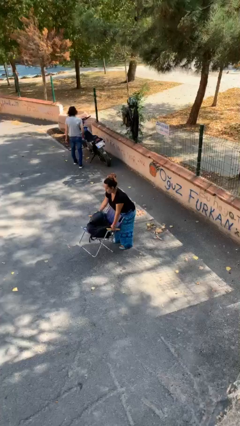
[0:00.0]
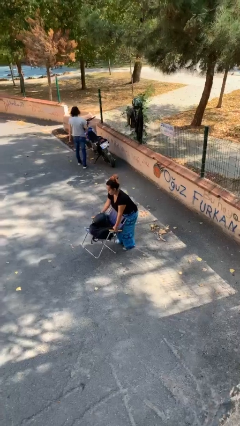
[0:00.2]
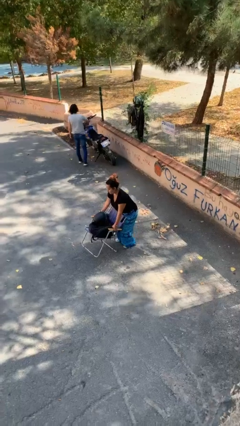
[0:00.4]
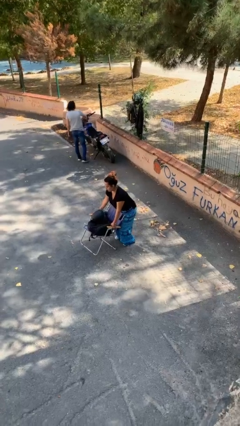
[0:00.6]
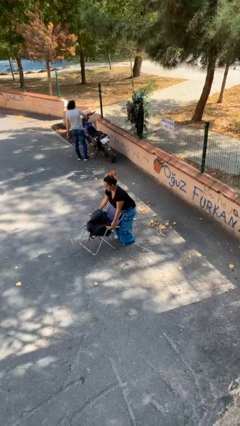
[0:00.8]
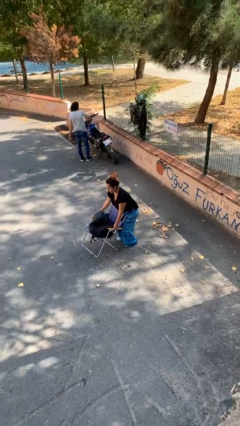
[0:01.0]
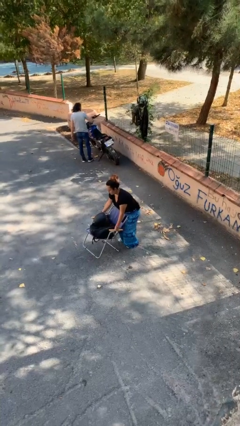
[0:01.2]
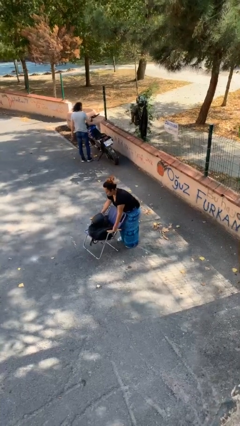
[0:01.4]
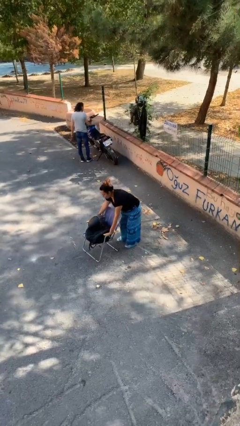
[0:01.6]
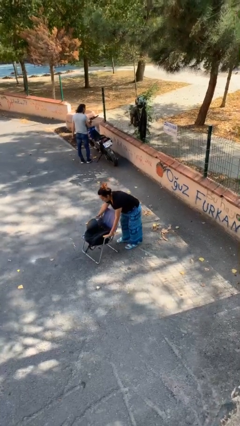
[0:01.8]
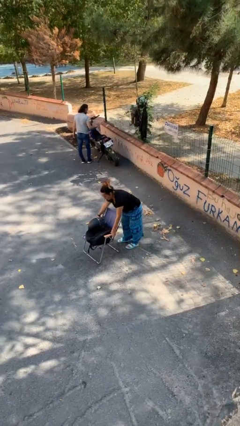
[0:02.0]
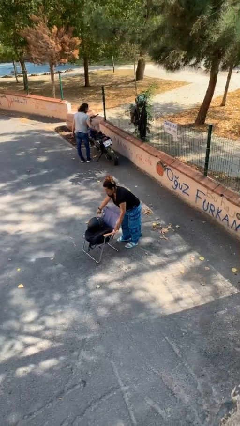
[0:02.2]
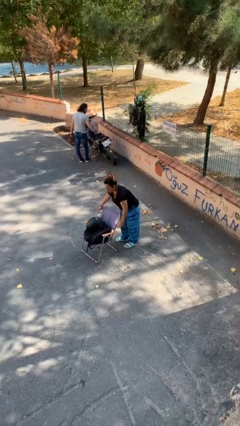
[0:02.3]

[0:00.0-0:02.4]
person puts down object on floor

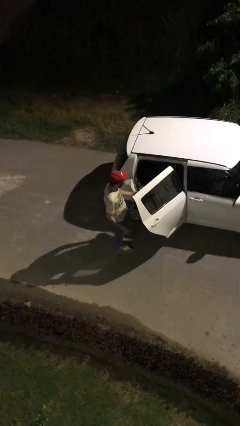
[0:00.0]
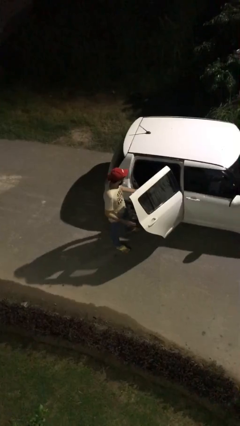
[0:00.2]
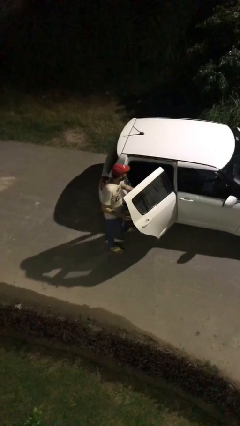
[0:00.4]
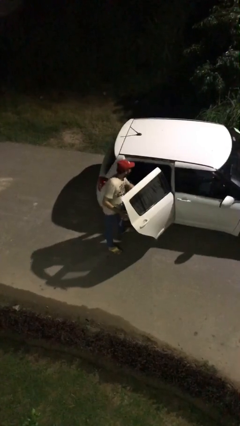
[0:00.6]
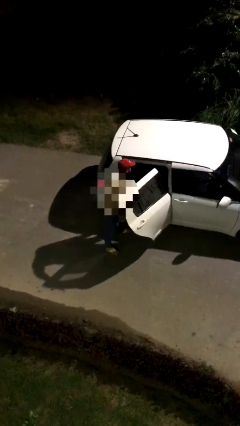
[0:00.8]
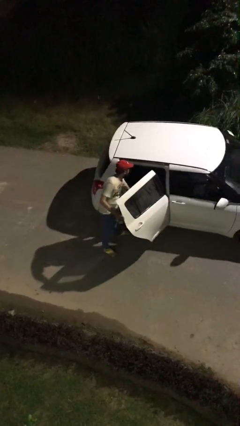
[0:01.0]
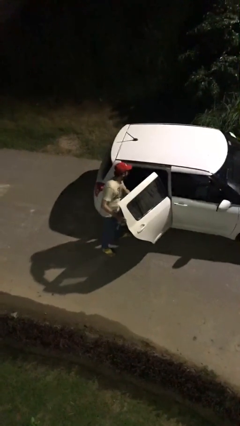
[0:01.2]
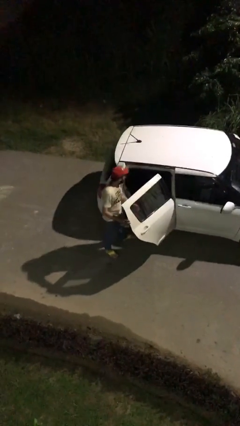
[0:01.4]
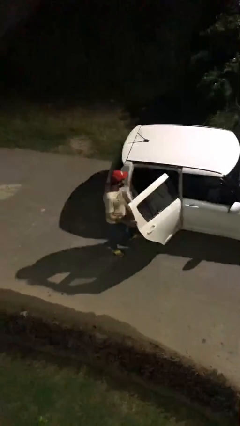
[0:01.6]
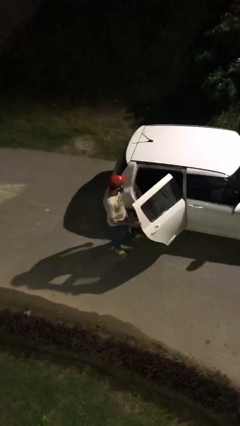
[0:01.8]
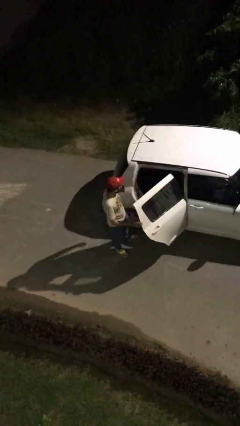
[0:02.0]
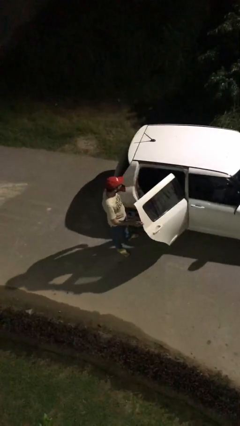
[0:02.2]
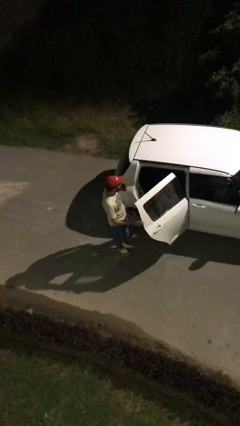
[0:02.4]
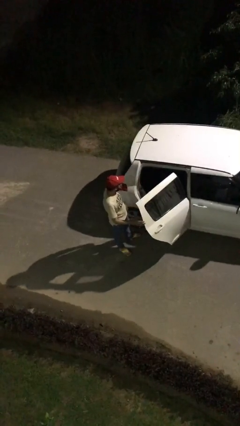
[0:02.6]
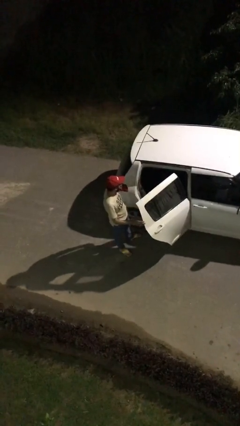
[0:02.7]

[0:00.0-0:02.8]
person loads car

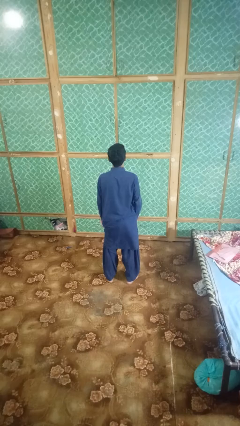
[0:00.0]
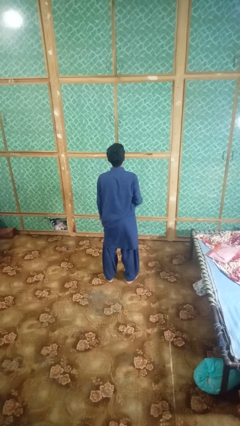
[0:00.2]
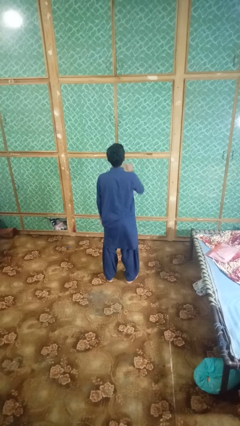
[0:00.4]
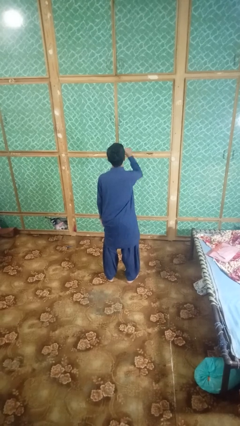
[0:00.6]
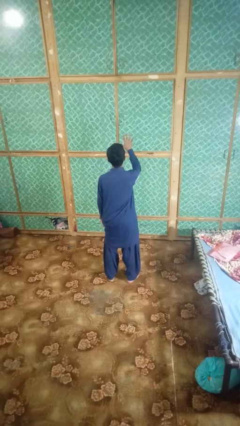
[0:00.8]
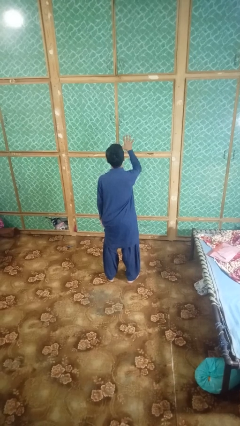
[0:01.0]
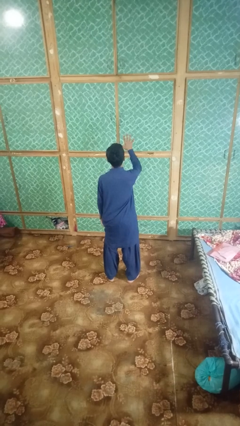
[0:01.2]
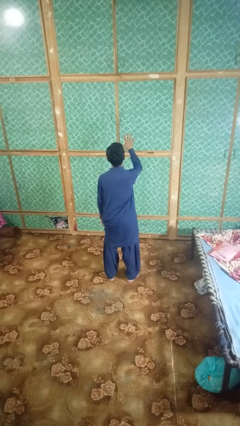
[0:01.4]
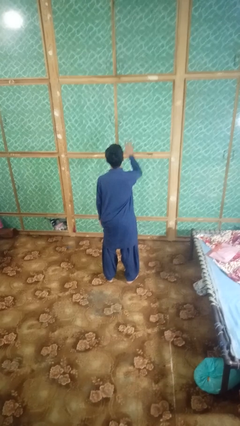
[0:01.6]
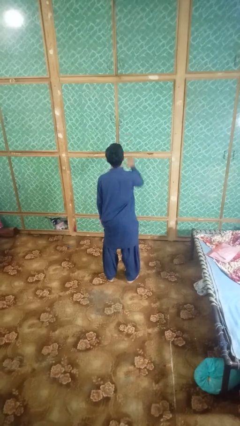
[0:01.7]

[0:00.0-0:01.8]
person gestures number five

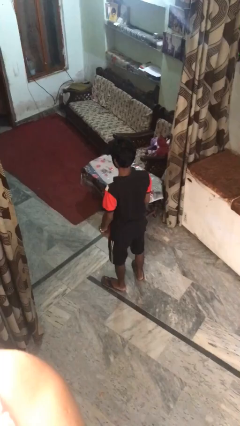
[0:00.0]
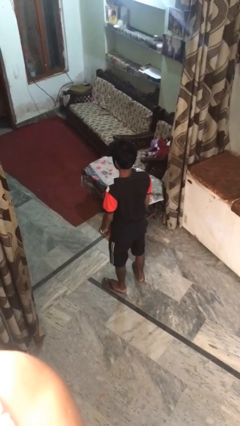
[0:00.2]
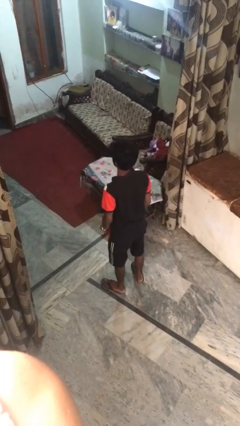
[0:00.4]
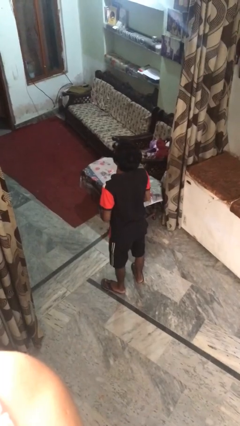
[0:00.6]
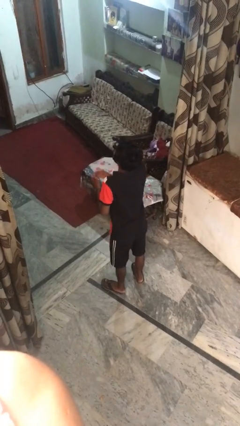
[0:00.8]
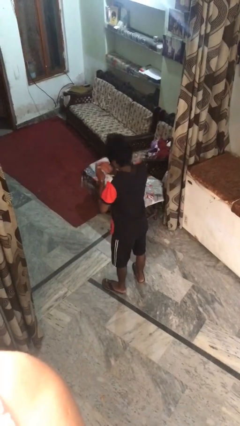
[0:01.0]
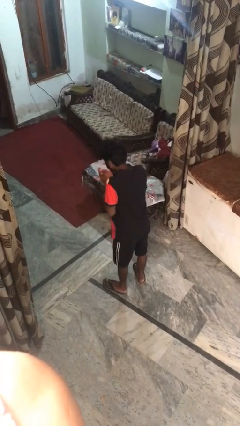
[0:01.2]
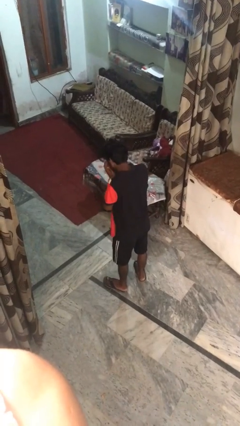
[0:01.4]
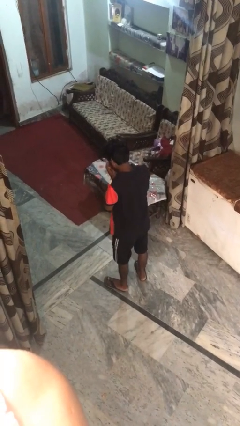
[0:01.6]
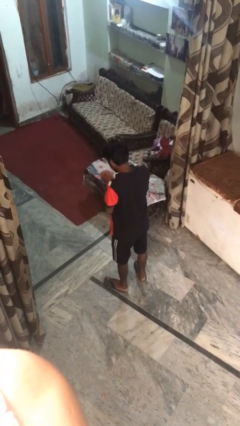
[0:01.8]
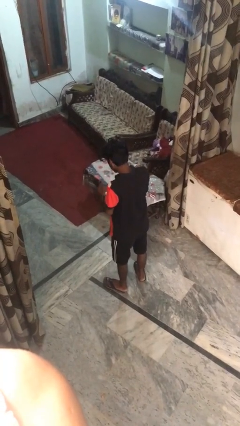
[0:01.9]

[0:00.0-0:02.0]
person sneezes into hand

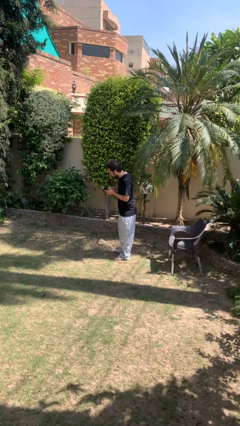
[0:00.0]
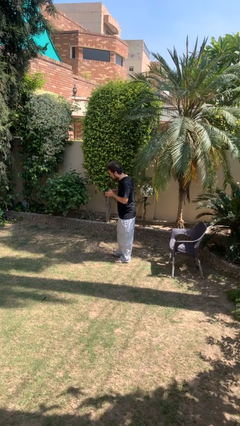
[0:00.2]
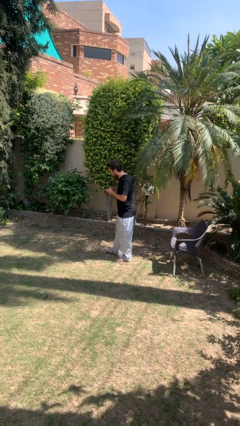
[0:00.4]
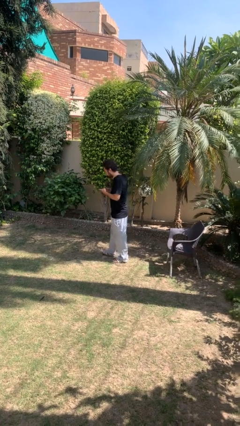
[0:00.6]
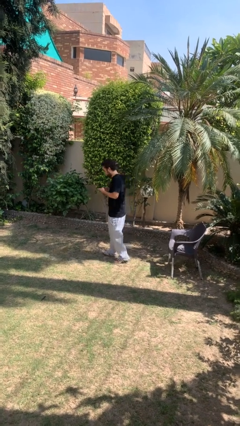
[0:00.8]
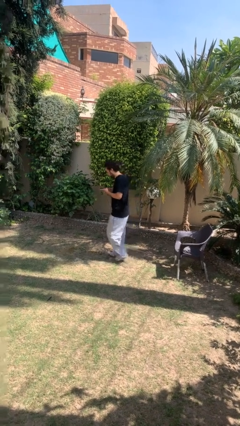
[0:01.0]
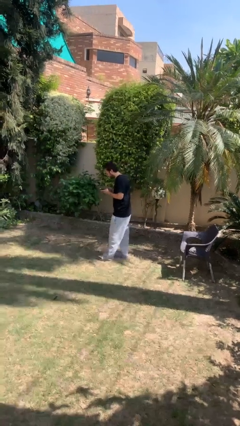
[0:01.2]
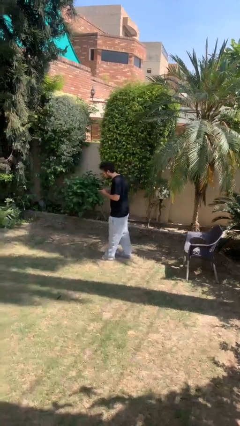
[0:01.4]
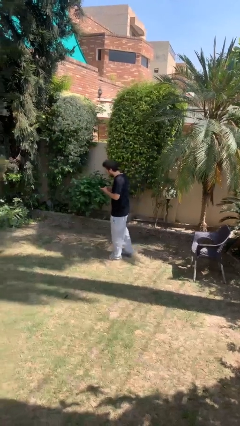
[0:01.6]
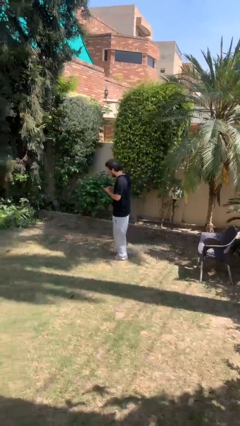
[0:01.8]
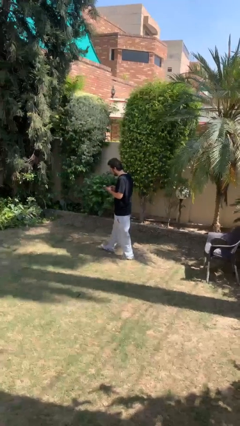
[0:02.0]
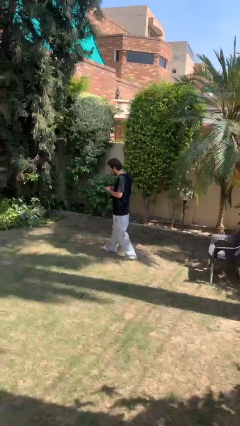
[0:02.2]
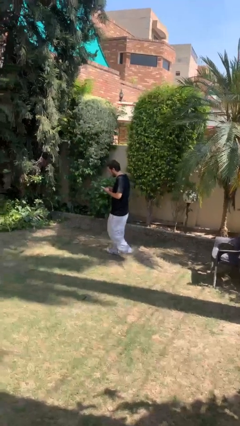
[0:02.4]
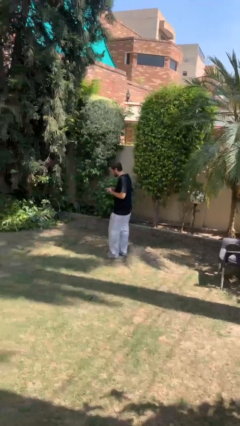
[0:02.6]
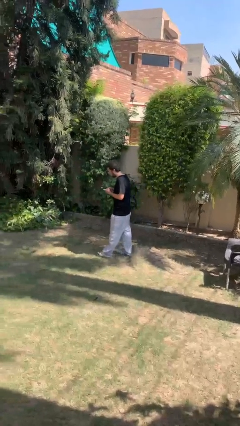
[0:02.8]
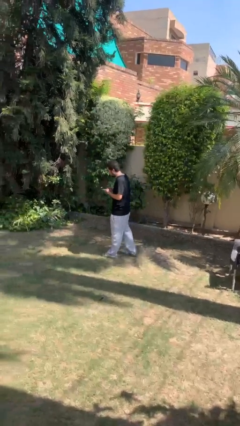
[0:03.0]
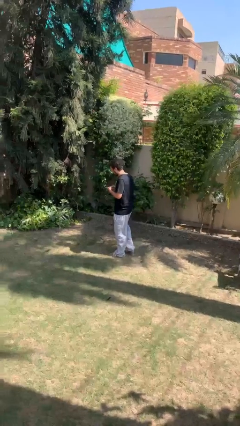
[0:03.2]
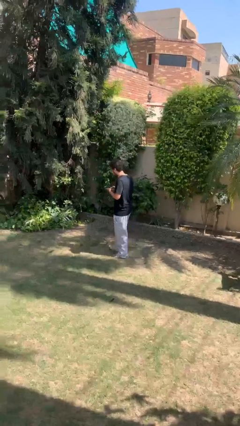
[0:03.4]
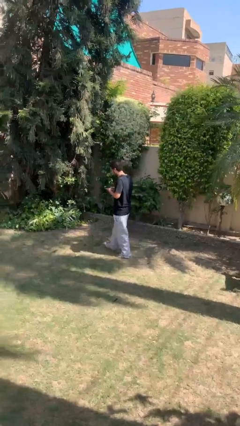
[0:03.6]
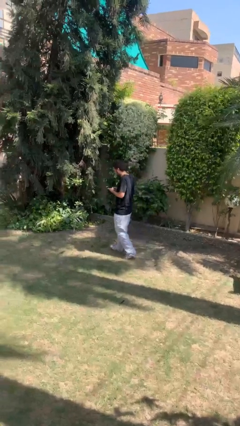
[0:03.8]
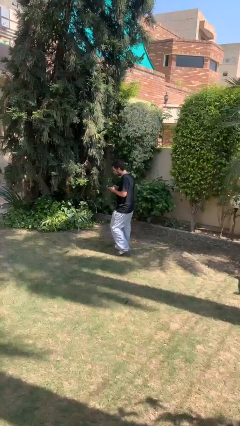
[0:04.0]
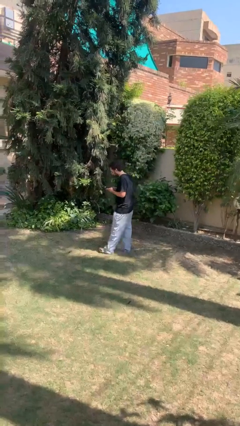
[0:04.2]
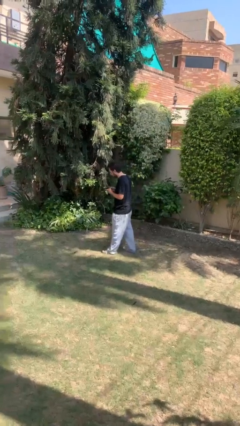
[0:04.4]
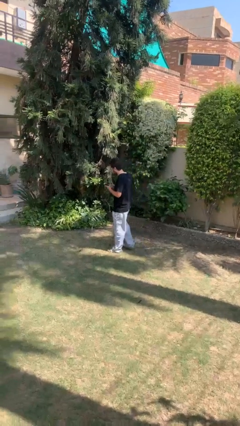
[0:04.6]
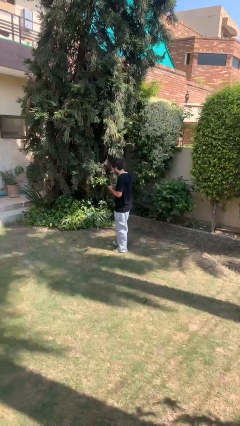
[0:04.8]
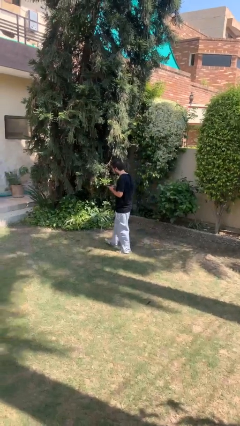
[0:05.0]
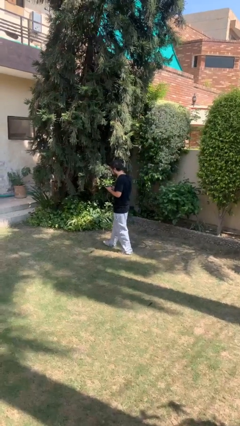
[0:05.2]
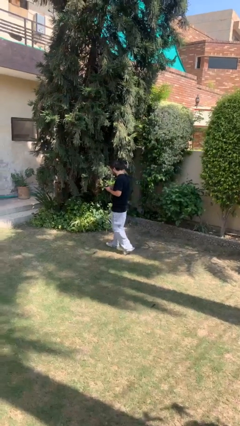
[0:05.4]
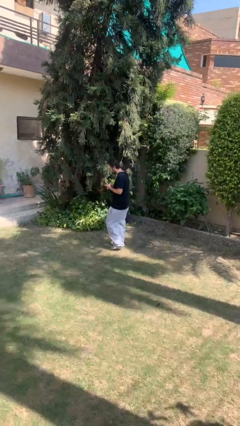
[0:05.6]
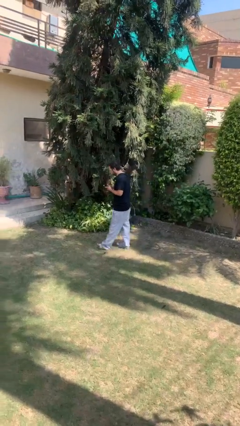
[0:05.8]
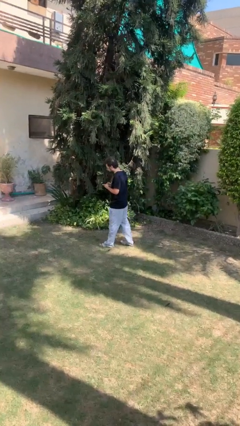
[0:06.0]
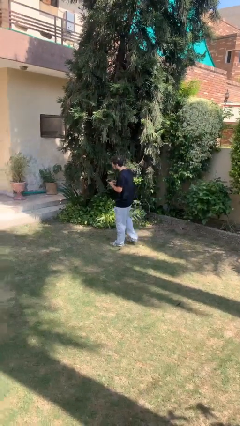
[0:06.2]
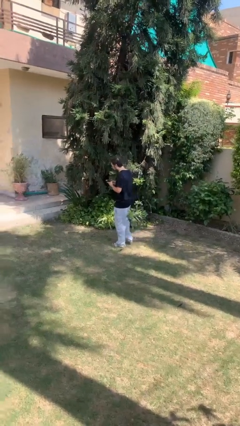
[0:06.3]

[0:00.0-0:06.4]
person texts on phone

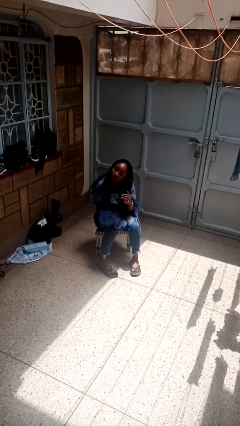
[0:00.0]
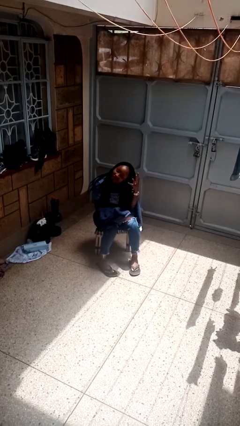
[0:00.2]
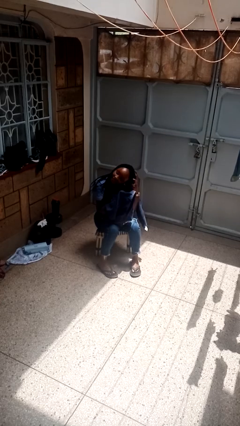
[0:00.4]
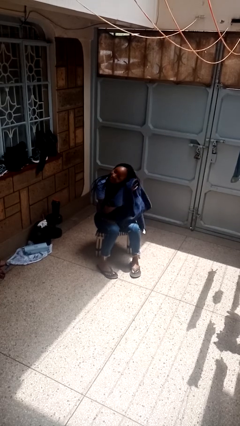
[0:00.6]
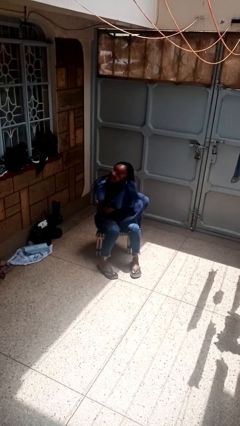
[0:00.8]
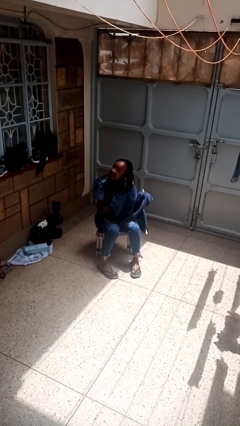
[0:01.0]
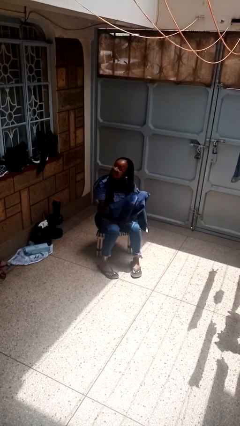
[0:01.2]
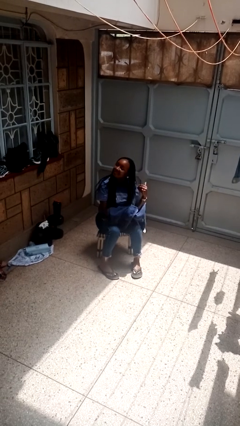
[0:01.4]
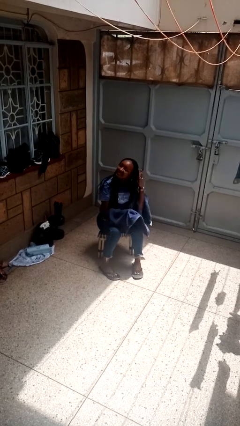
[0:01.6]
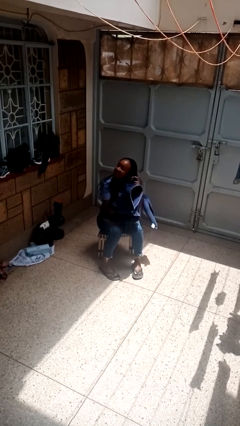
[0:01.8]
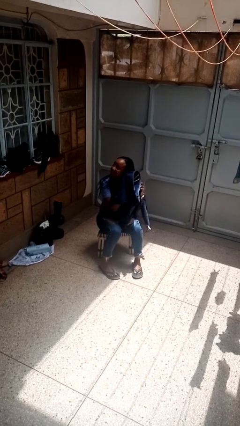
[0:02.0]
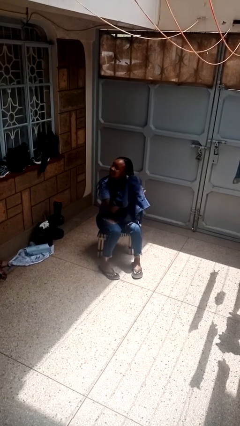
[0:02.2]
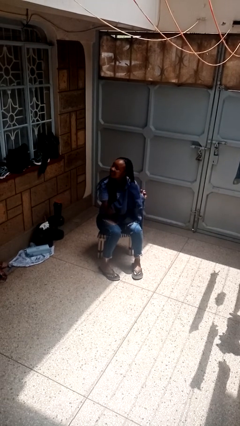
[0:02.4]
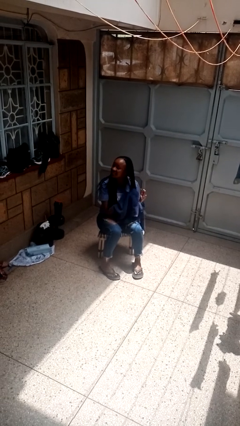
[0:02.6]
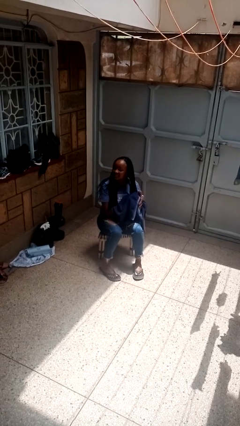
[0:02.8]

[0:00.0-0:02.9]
person dries hair with towel
